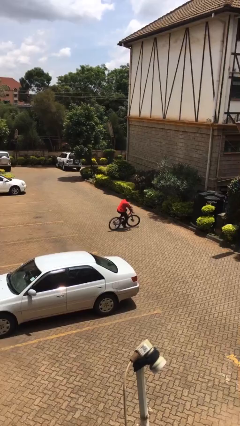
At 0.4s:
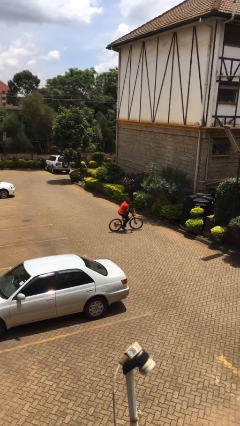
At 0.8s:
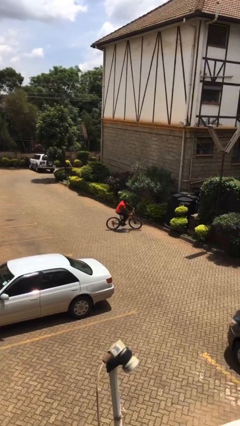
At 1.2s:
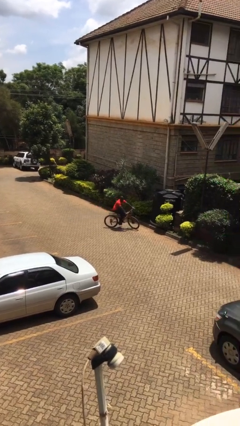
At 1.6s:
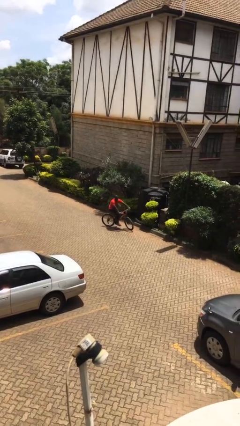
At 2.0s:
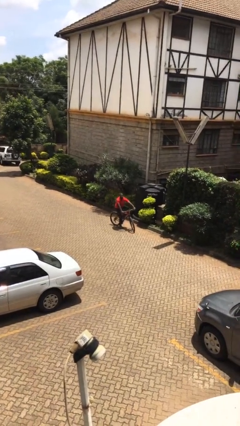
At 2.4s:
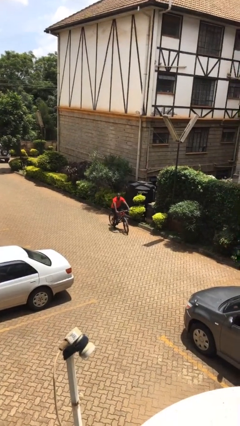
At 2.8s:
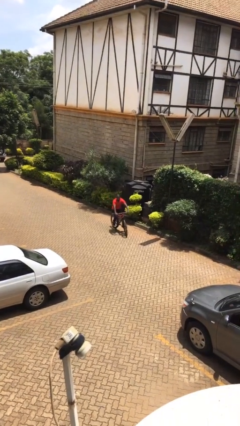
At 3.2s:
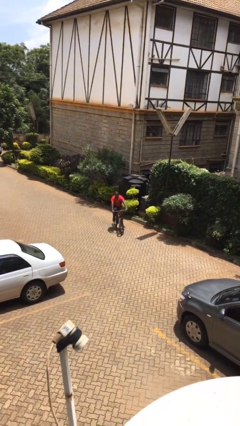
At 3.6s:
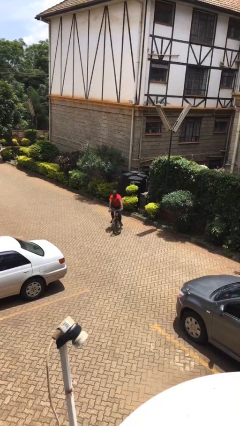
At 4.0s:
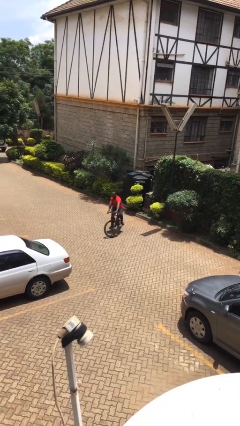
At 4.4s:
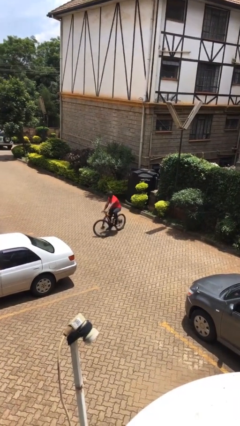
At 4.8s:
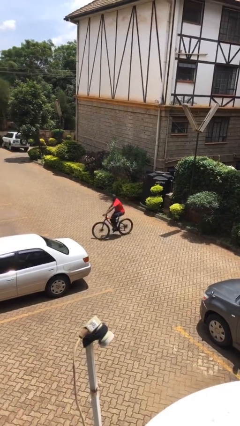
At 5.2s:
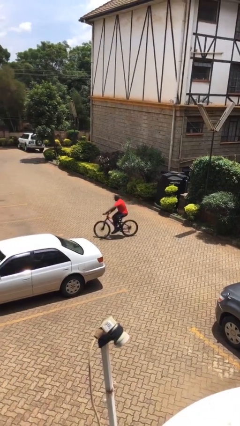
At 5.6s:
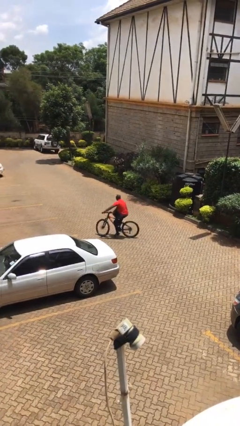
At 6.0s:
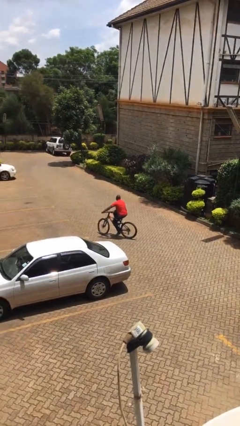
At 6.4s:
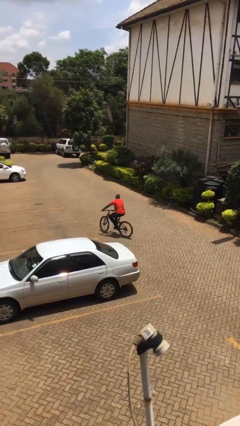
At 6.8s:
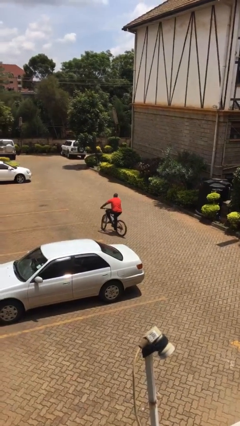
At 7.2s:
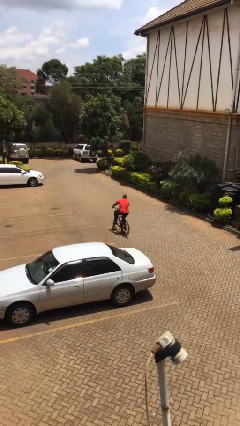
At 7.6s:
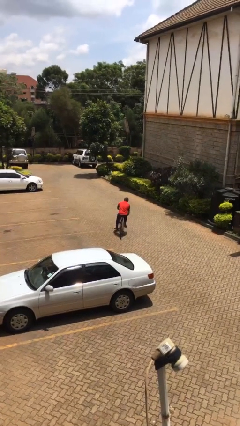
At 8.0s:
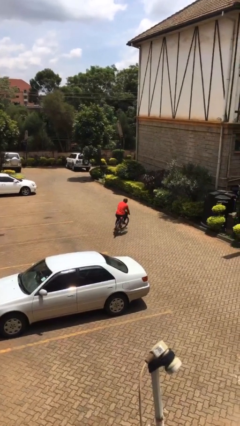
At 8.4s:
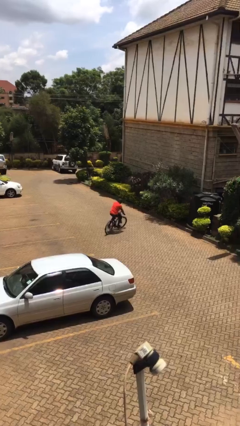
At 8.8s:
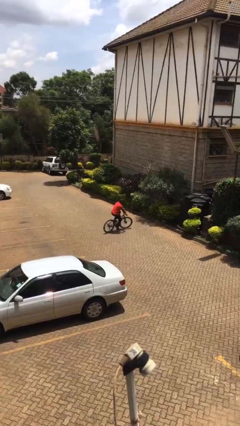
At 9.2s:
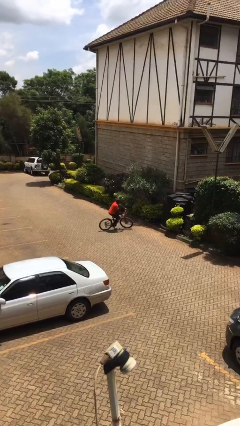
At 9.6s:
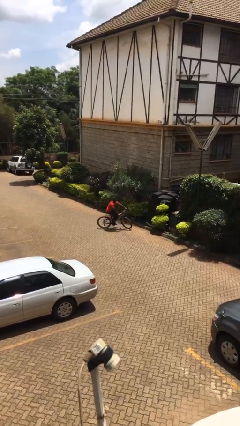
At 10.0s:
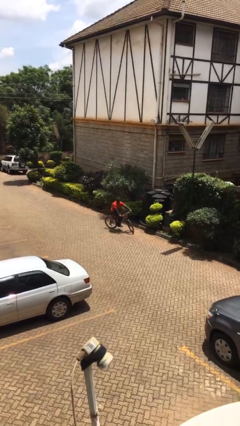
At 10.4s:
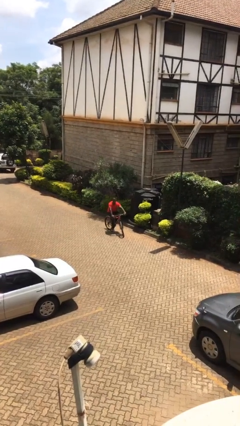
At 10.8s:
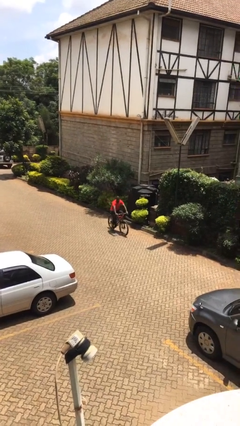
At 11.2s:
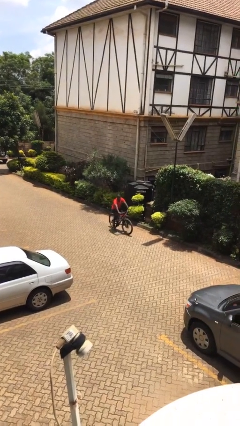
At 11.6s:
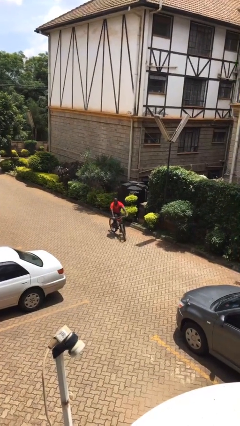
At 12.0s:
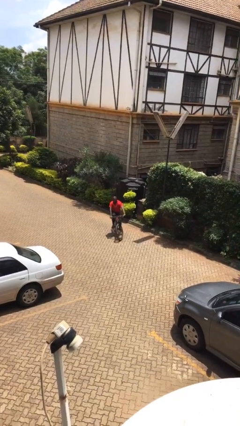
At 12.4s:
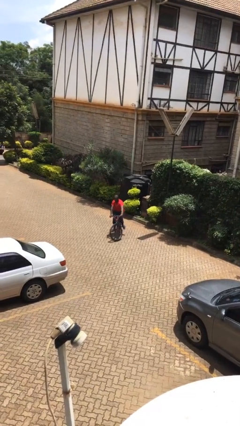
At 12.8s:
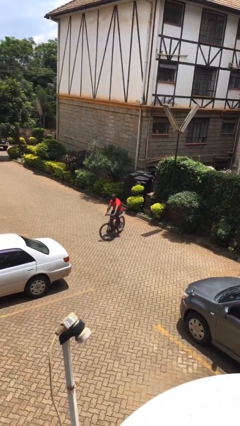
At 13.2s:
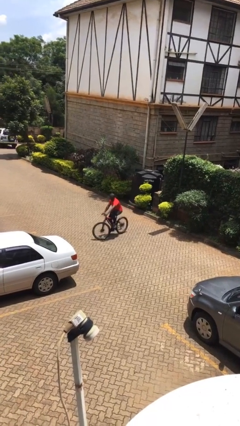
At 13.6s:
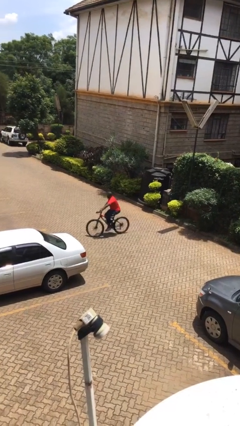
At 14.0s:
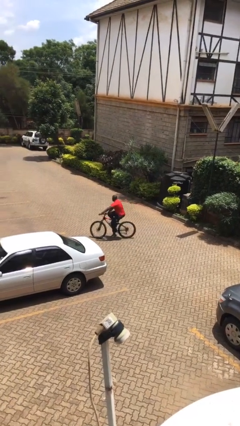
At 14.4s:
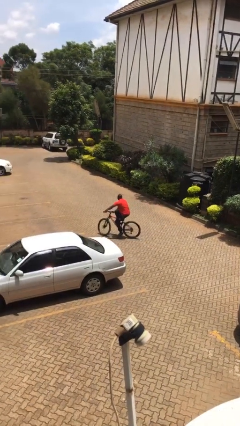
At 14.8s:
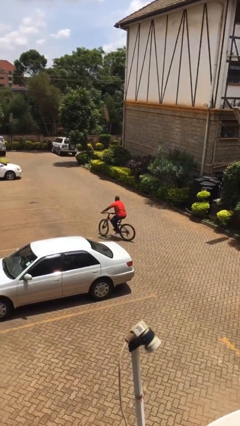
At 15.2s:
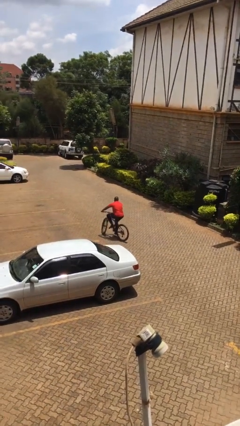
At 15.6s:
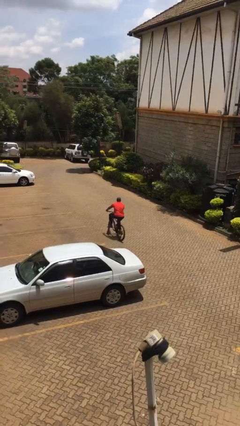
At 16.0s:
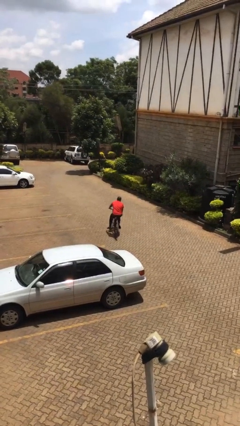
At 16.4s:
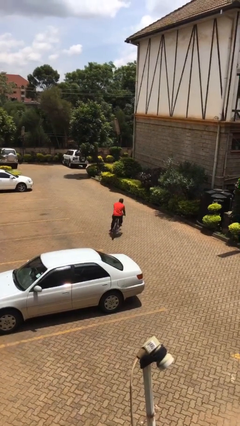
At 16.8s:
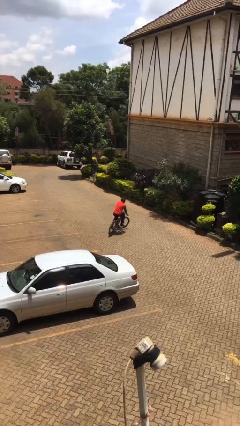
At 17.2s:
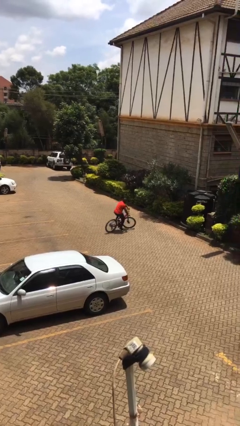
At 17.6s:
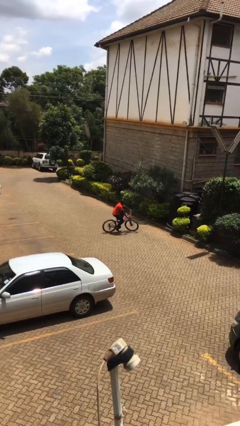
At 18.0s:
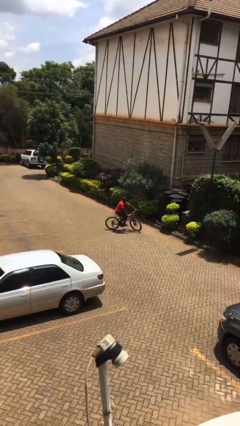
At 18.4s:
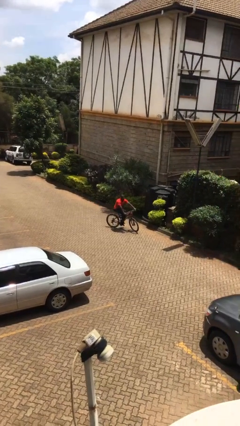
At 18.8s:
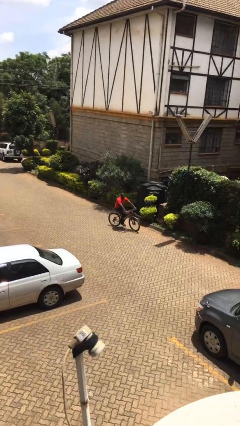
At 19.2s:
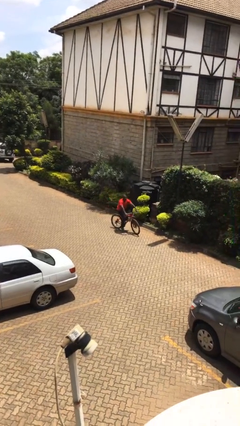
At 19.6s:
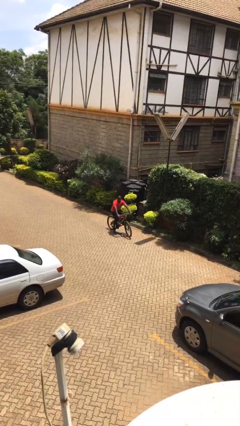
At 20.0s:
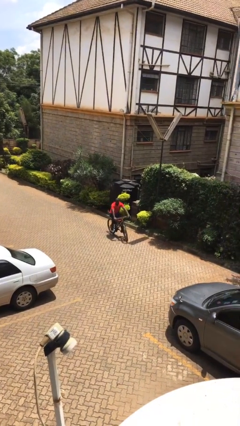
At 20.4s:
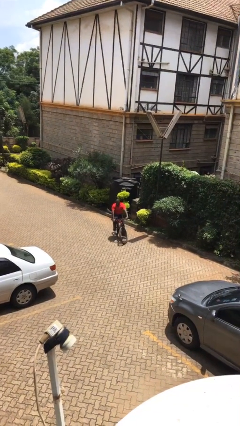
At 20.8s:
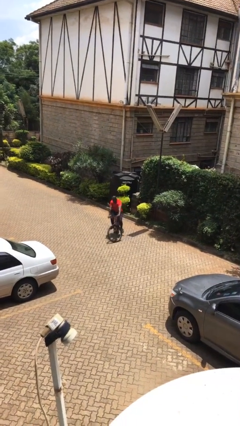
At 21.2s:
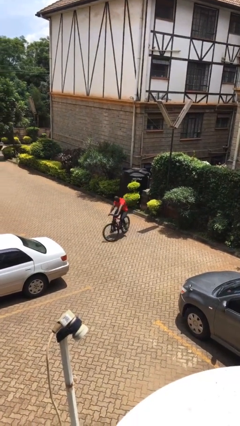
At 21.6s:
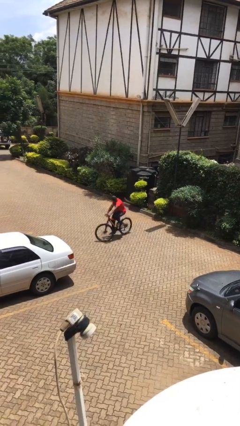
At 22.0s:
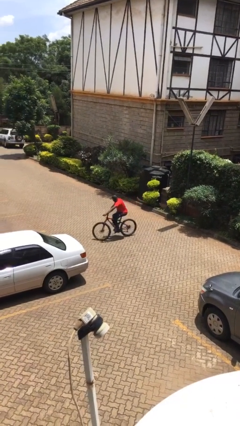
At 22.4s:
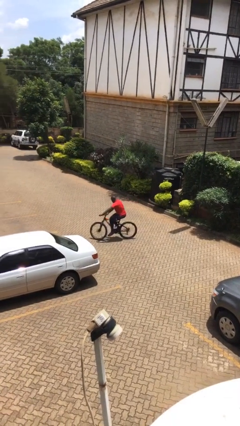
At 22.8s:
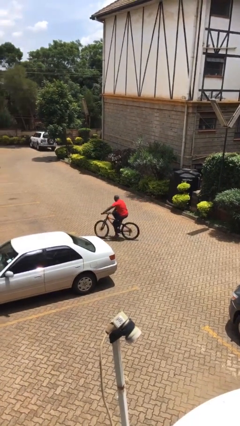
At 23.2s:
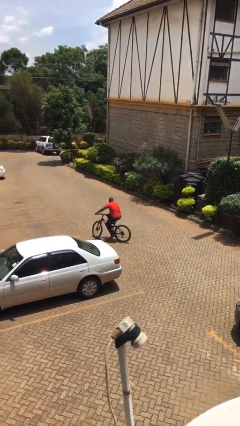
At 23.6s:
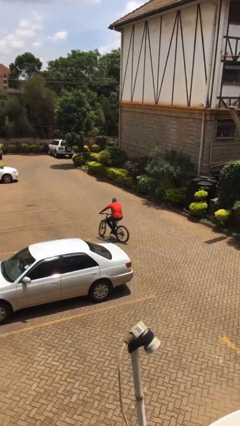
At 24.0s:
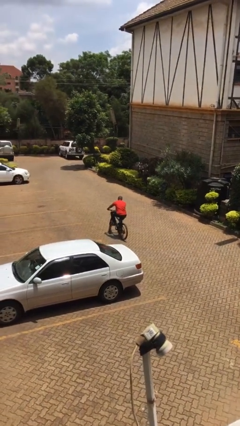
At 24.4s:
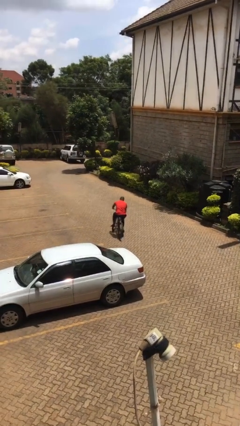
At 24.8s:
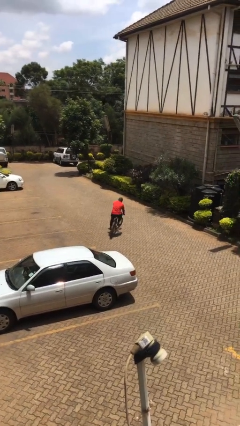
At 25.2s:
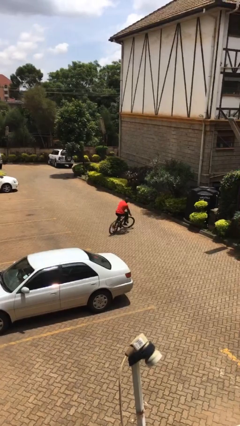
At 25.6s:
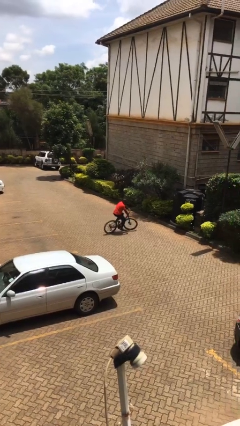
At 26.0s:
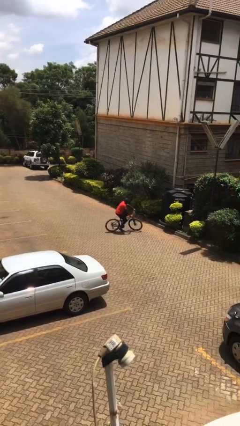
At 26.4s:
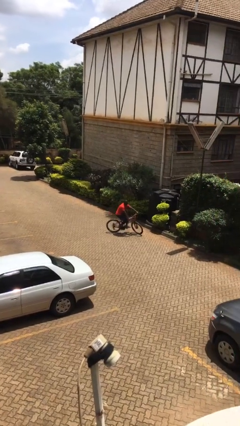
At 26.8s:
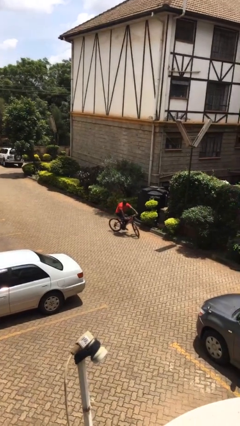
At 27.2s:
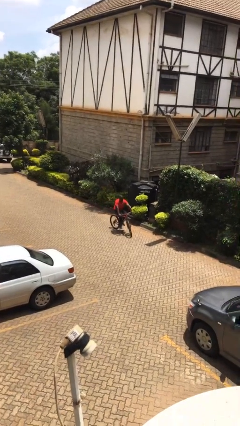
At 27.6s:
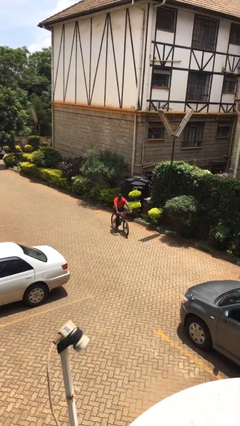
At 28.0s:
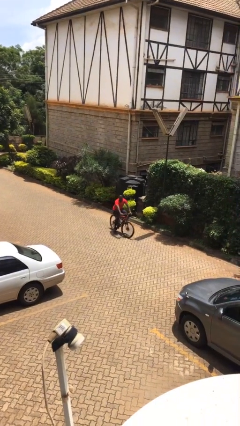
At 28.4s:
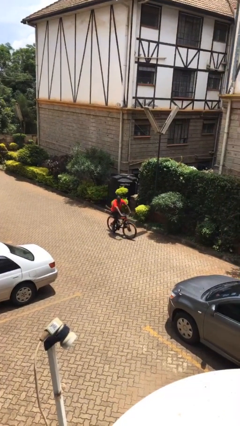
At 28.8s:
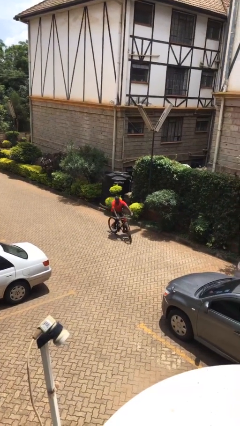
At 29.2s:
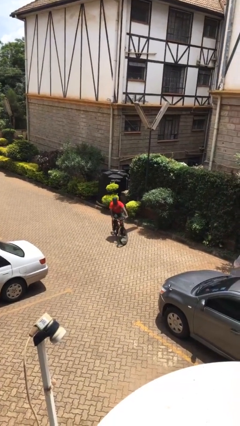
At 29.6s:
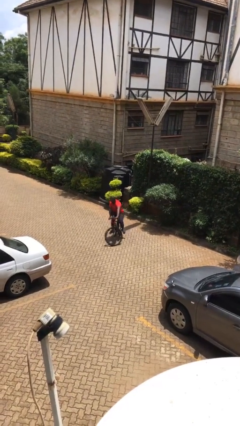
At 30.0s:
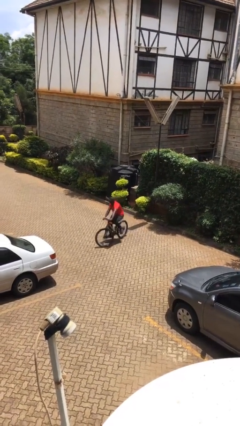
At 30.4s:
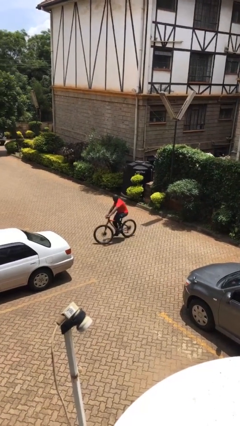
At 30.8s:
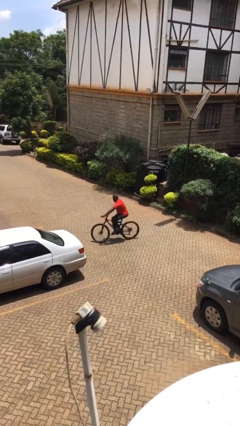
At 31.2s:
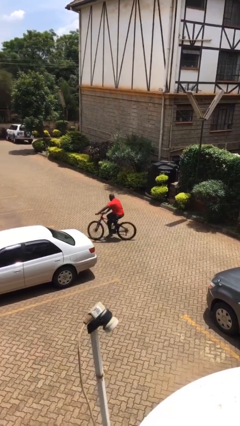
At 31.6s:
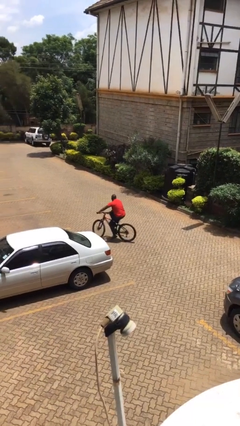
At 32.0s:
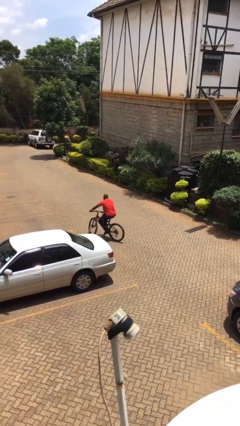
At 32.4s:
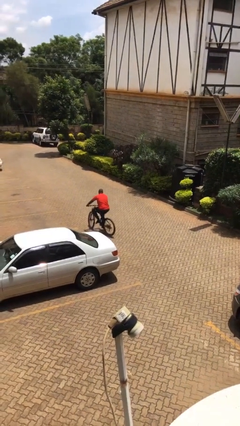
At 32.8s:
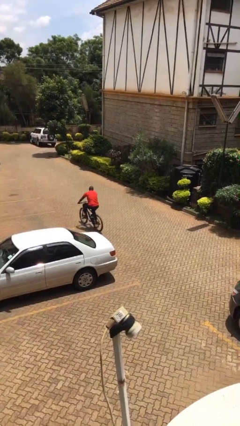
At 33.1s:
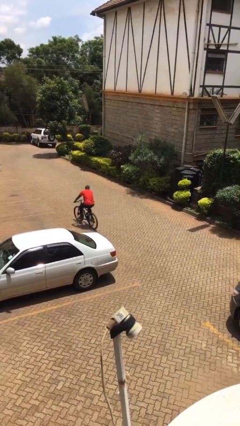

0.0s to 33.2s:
person rides bicycle

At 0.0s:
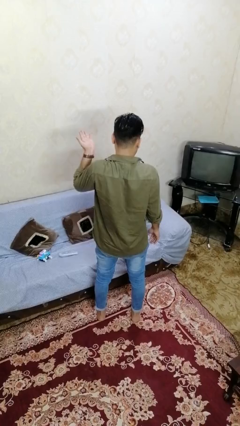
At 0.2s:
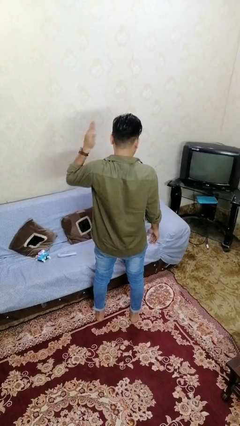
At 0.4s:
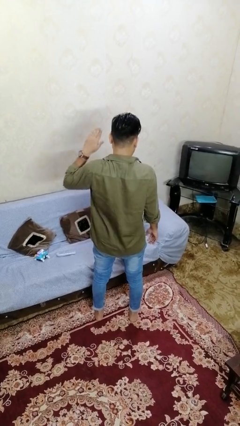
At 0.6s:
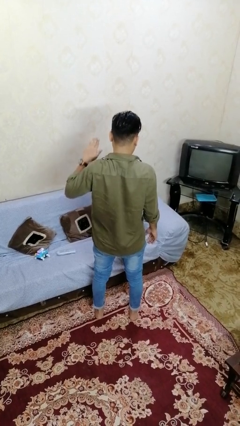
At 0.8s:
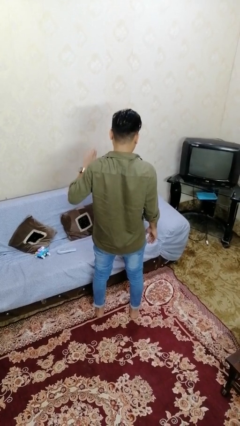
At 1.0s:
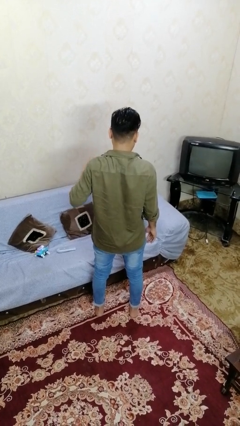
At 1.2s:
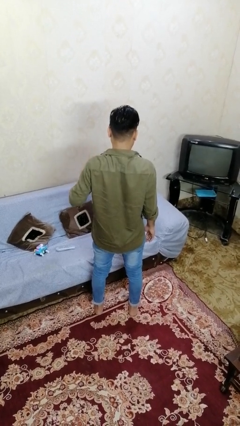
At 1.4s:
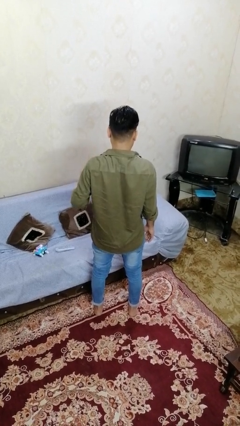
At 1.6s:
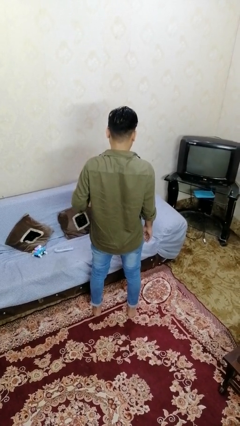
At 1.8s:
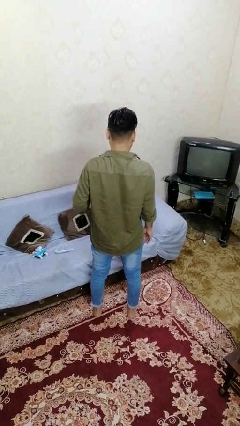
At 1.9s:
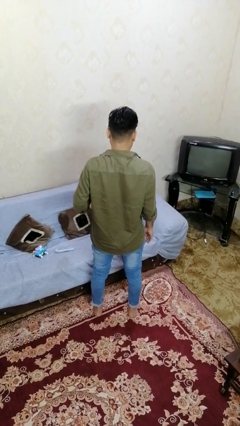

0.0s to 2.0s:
person gestures swipe down
